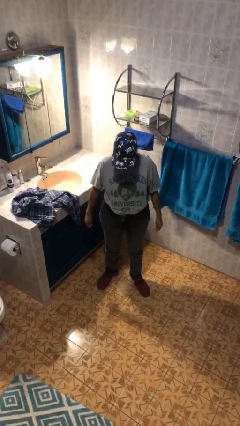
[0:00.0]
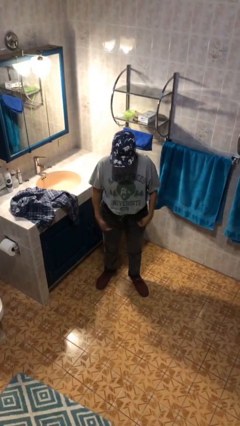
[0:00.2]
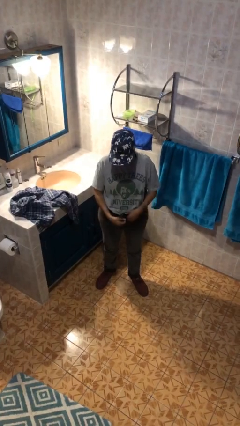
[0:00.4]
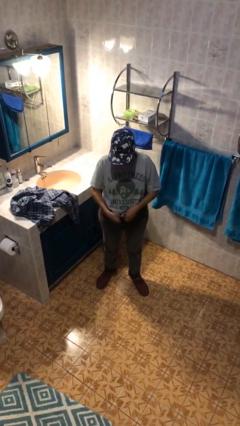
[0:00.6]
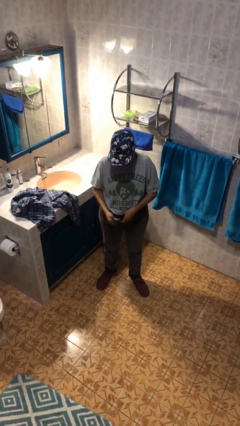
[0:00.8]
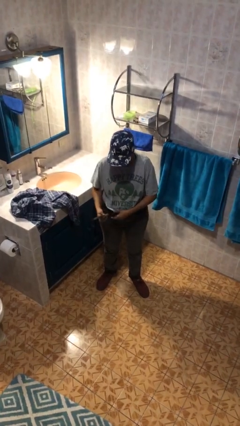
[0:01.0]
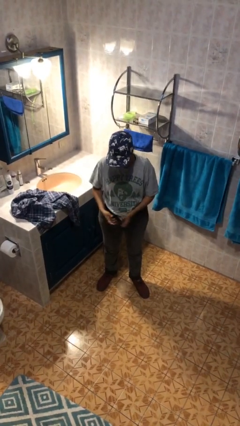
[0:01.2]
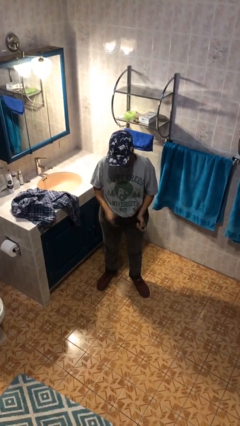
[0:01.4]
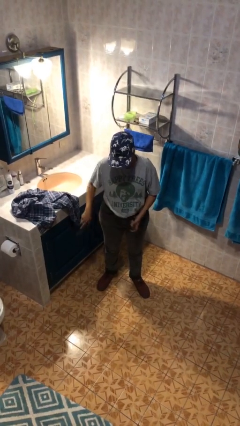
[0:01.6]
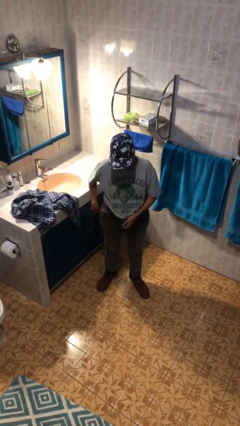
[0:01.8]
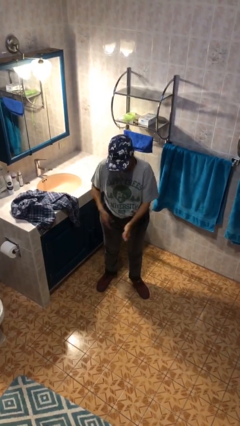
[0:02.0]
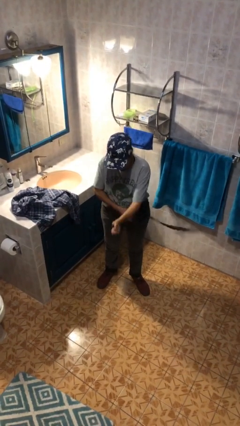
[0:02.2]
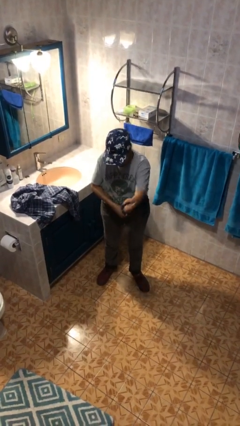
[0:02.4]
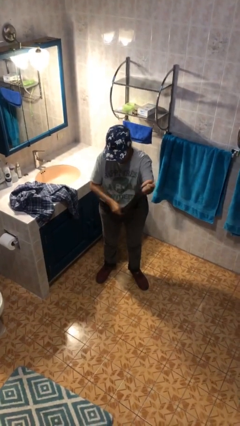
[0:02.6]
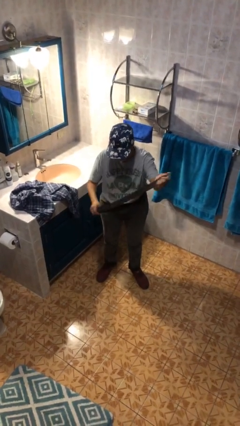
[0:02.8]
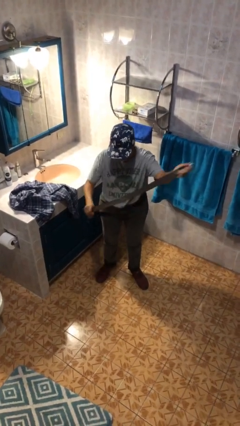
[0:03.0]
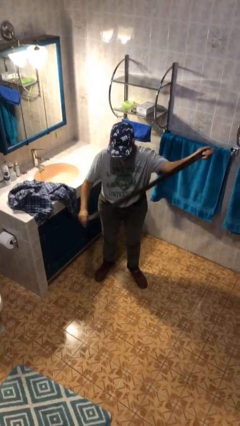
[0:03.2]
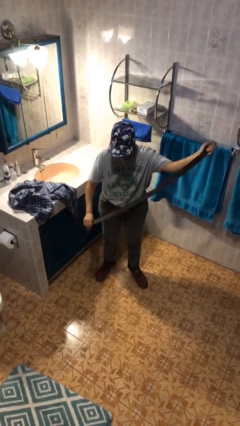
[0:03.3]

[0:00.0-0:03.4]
person takes off belt

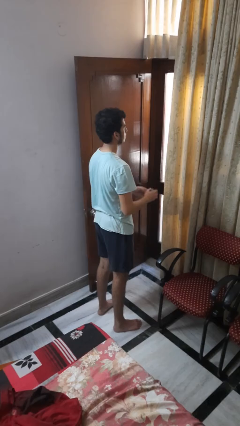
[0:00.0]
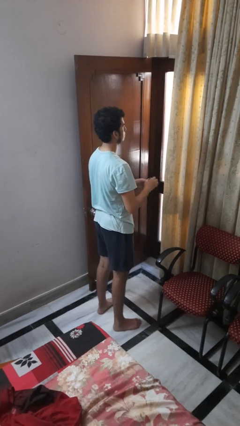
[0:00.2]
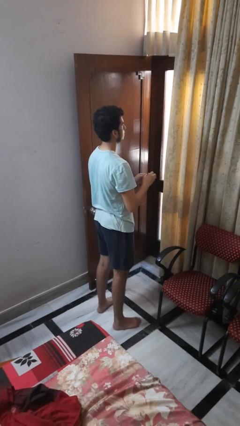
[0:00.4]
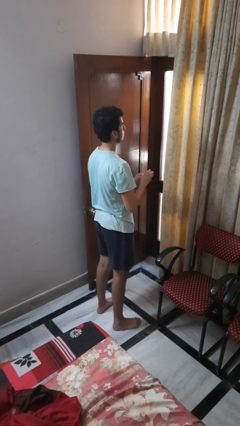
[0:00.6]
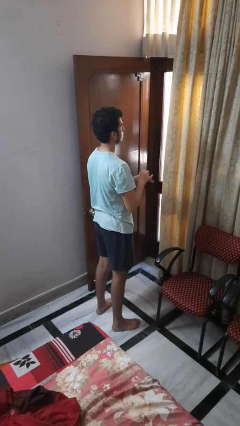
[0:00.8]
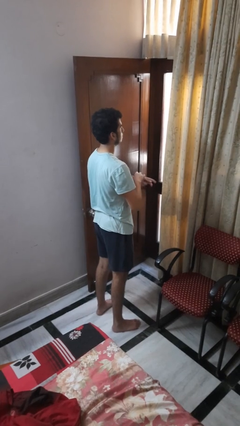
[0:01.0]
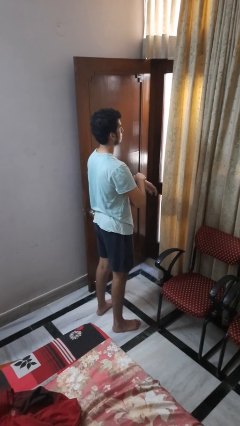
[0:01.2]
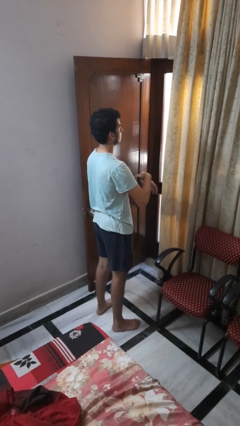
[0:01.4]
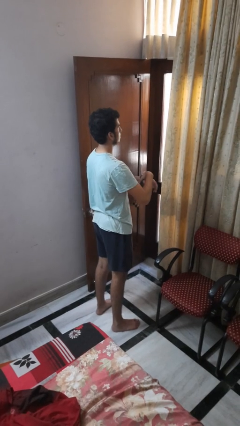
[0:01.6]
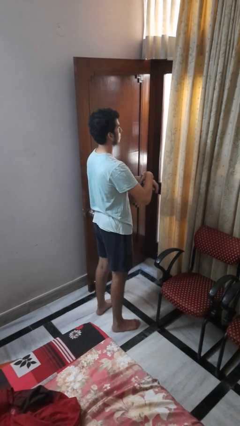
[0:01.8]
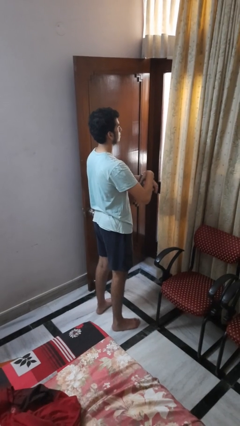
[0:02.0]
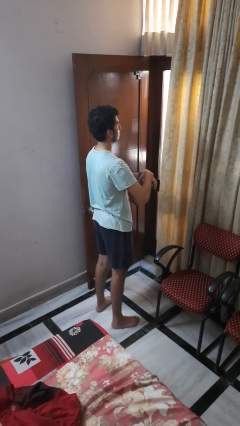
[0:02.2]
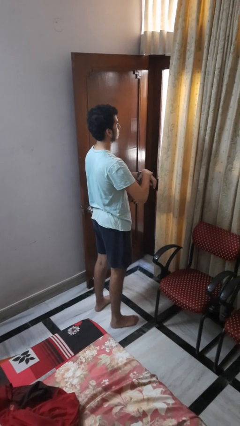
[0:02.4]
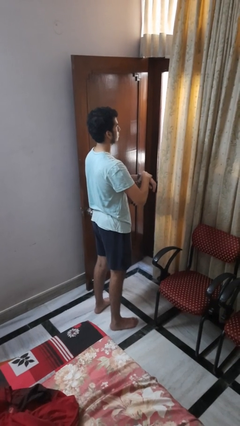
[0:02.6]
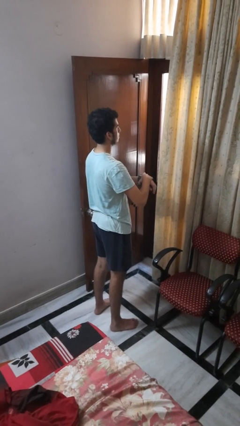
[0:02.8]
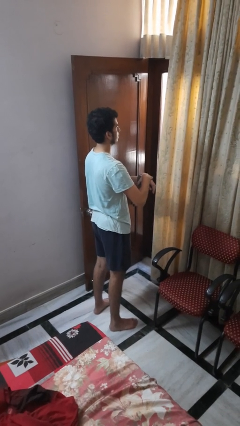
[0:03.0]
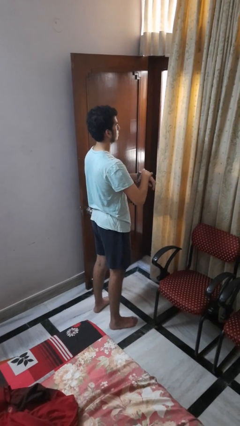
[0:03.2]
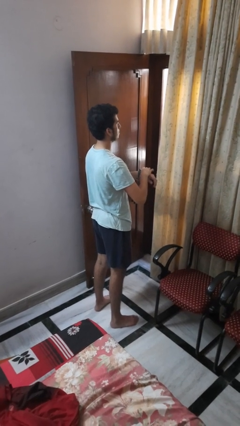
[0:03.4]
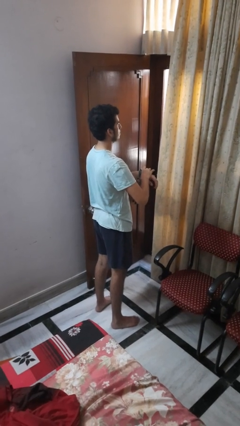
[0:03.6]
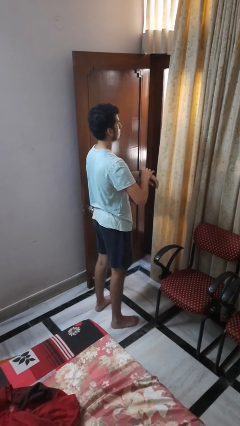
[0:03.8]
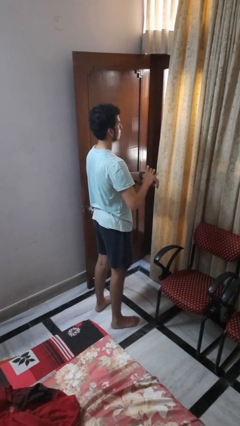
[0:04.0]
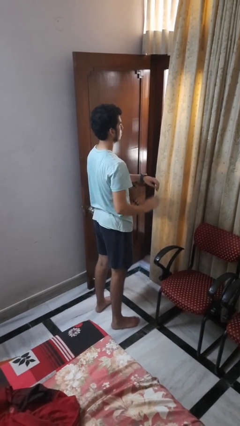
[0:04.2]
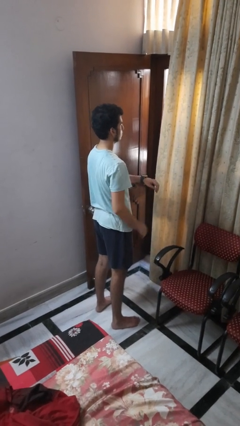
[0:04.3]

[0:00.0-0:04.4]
person puts on wristwatch

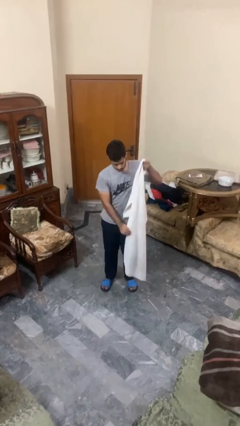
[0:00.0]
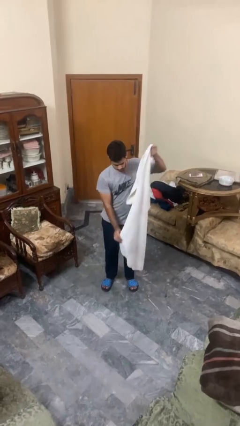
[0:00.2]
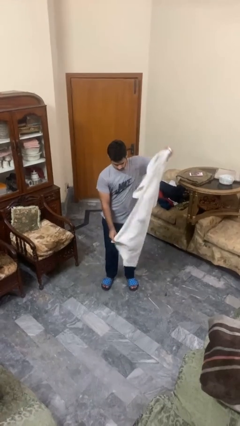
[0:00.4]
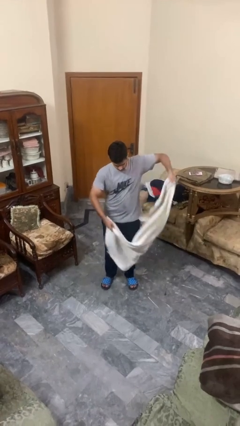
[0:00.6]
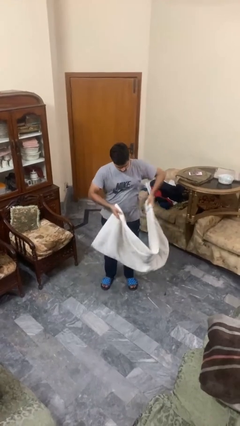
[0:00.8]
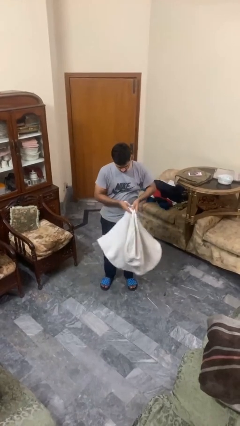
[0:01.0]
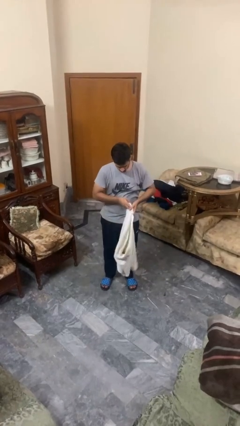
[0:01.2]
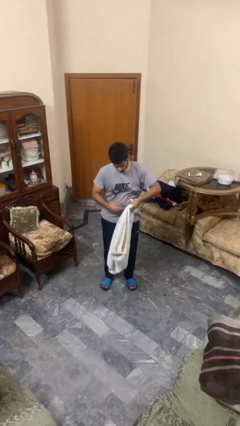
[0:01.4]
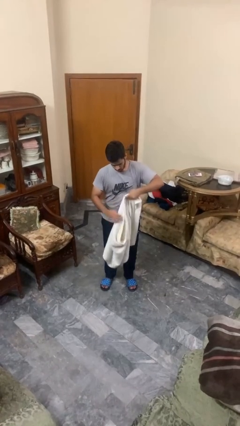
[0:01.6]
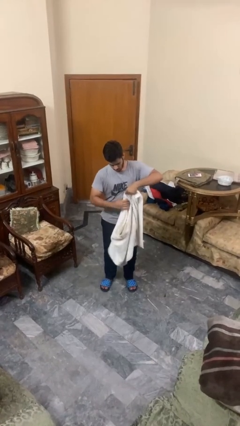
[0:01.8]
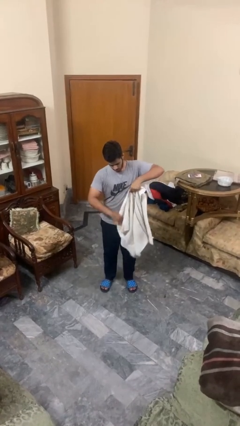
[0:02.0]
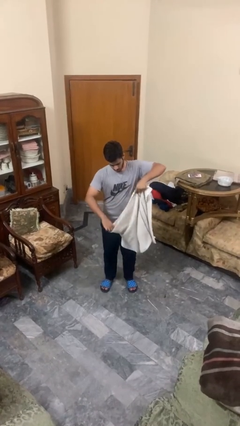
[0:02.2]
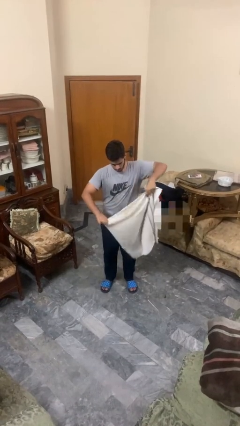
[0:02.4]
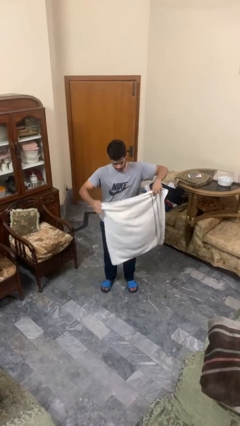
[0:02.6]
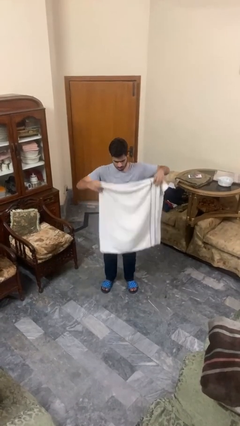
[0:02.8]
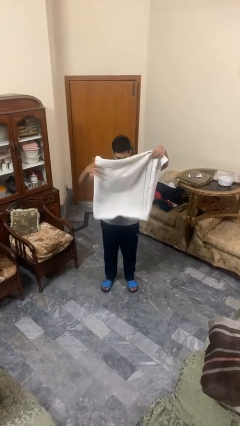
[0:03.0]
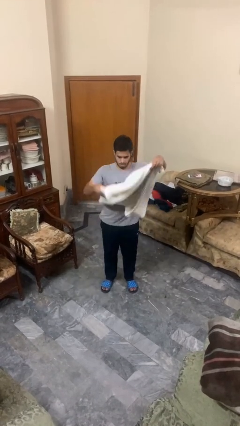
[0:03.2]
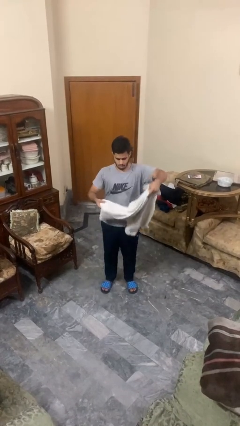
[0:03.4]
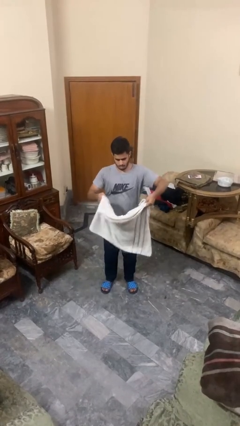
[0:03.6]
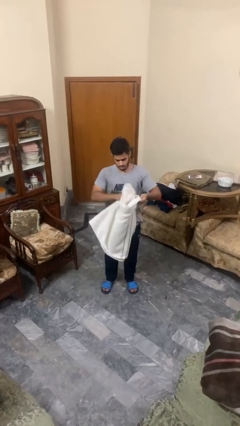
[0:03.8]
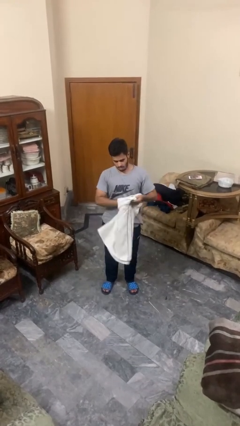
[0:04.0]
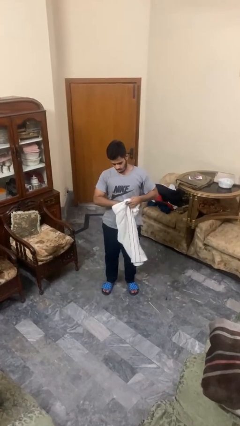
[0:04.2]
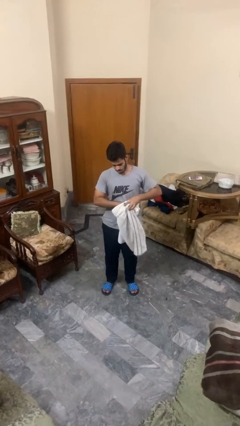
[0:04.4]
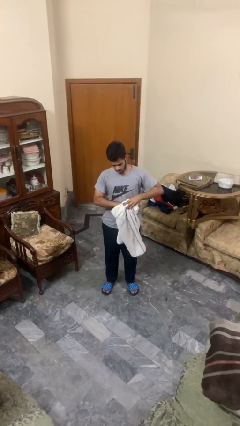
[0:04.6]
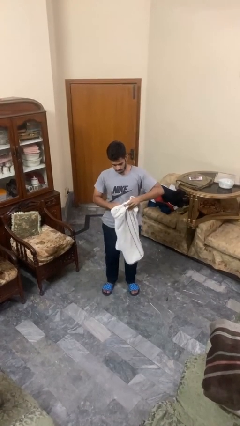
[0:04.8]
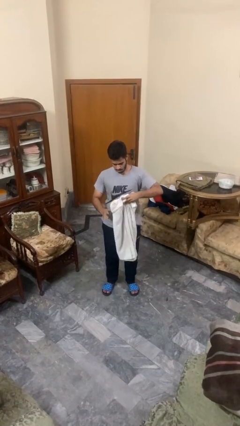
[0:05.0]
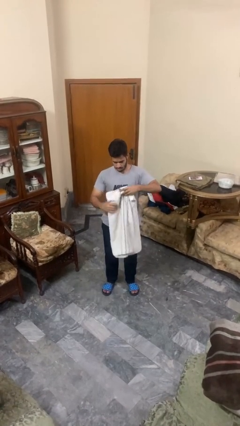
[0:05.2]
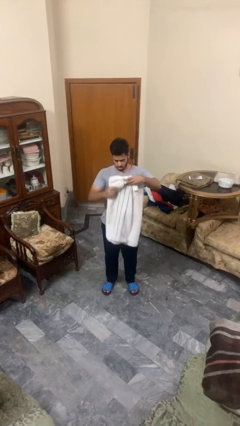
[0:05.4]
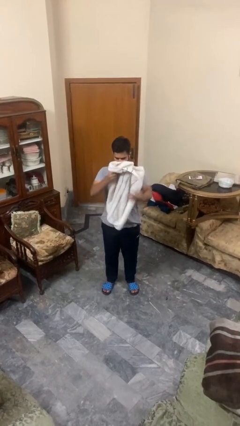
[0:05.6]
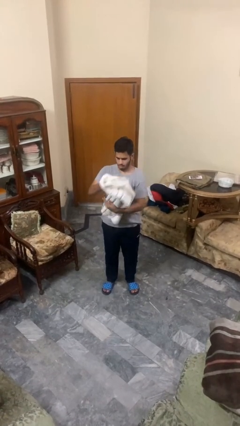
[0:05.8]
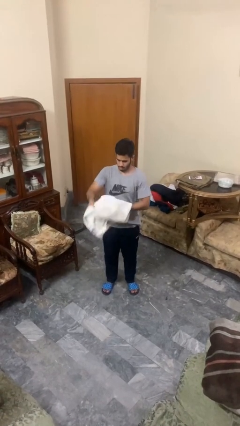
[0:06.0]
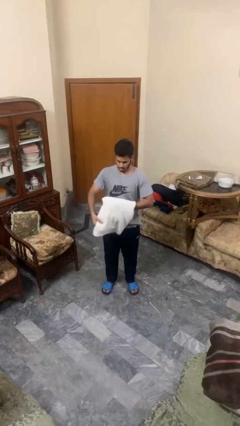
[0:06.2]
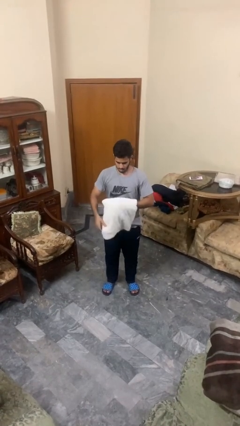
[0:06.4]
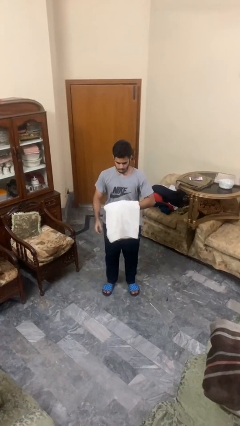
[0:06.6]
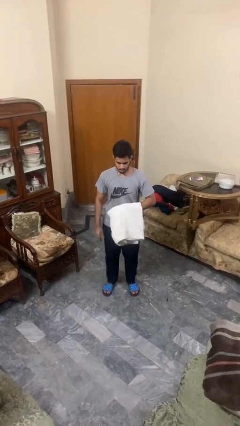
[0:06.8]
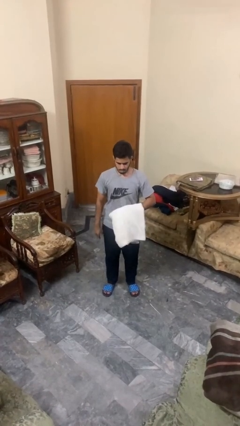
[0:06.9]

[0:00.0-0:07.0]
person folds towel

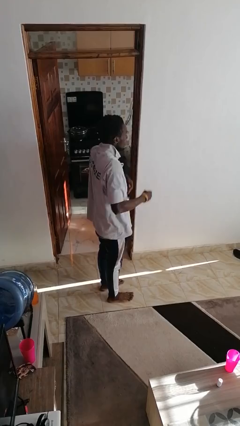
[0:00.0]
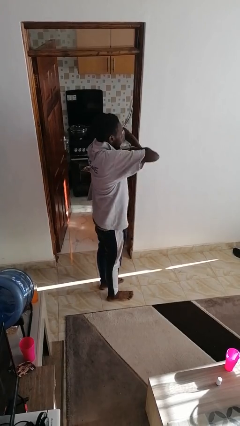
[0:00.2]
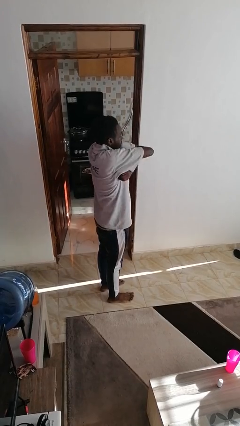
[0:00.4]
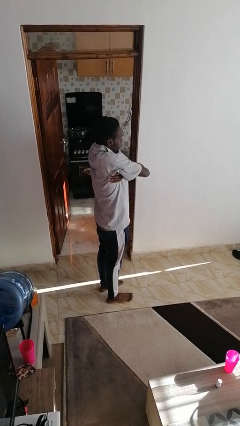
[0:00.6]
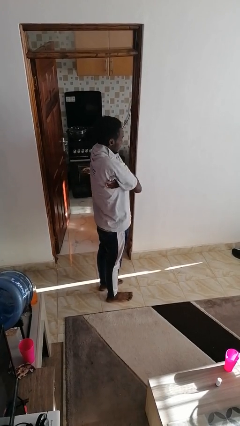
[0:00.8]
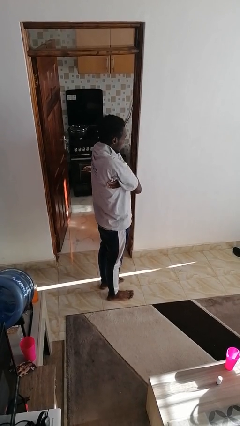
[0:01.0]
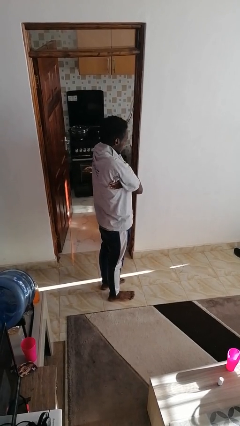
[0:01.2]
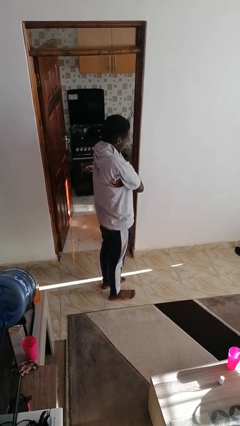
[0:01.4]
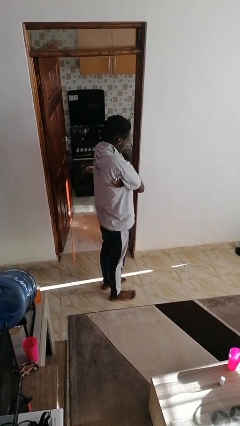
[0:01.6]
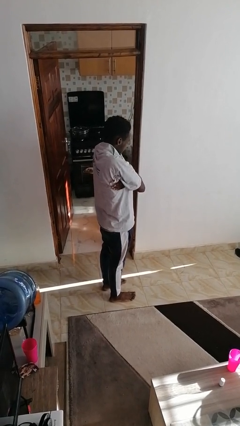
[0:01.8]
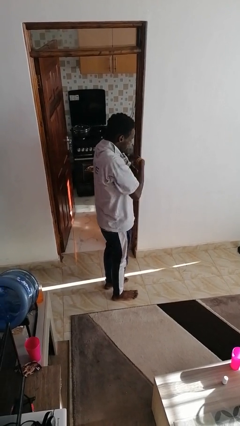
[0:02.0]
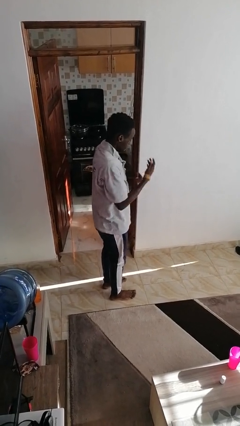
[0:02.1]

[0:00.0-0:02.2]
person crosses arms

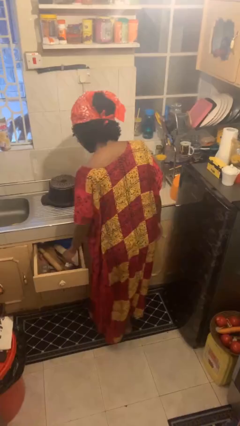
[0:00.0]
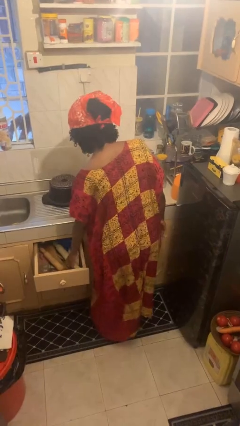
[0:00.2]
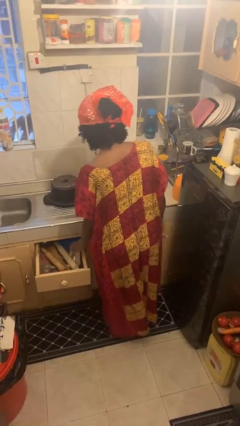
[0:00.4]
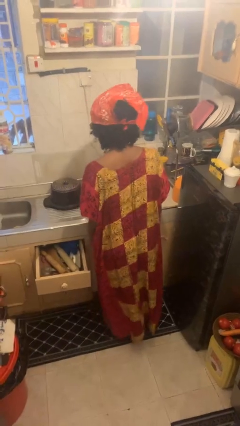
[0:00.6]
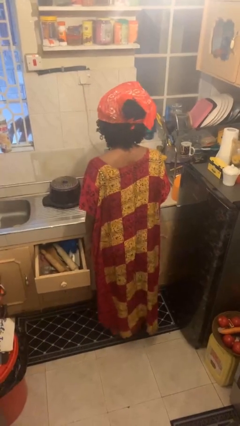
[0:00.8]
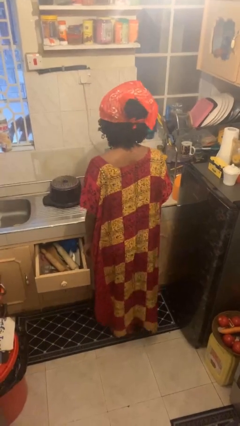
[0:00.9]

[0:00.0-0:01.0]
person puts object into kitchen drawer
